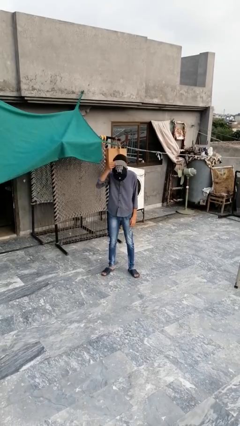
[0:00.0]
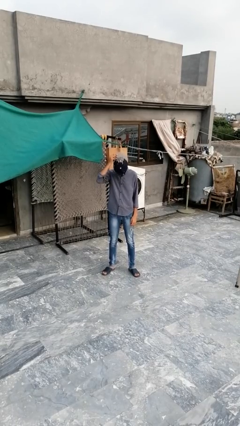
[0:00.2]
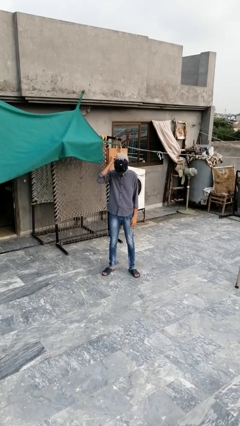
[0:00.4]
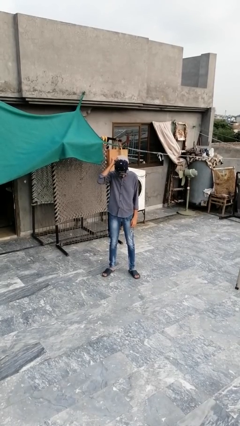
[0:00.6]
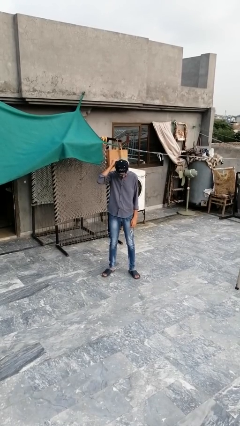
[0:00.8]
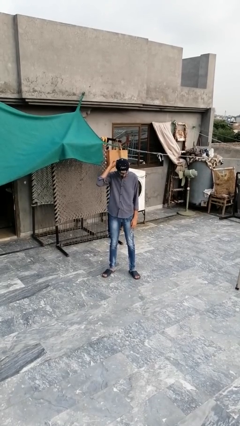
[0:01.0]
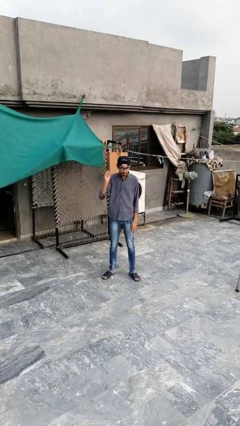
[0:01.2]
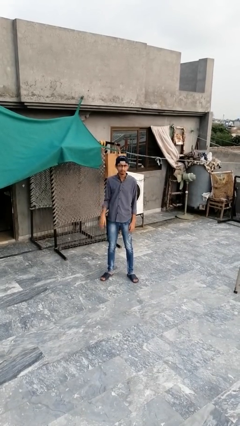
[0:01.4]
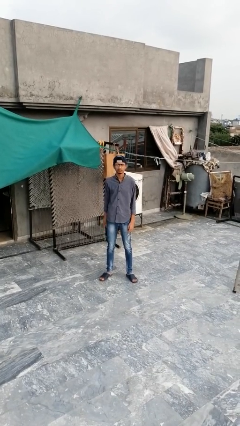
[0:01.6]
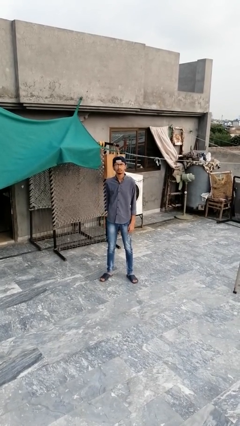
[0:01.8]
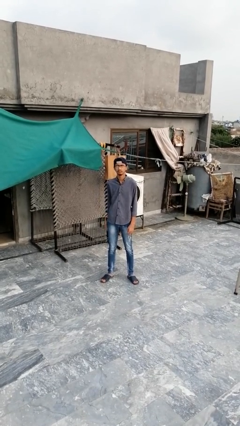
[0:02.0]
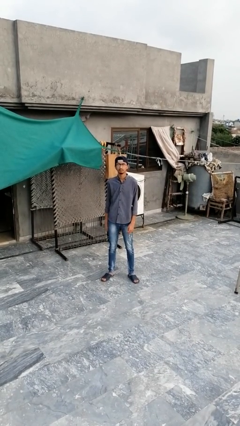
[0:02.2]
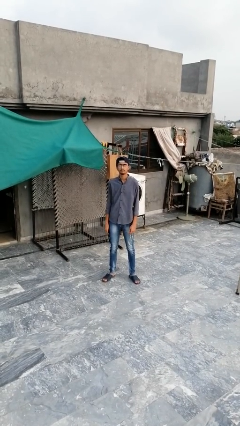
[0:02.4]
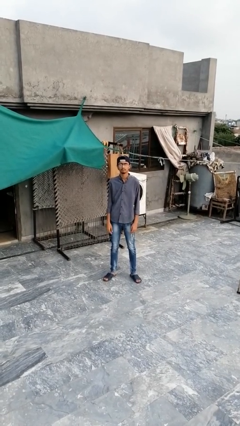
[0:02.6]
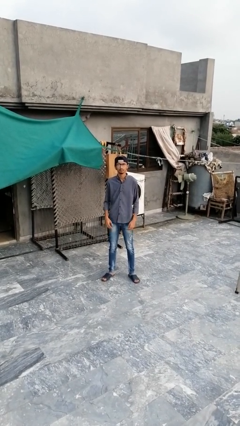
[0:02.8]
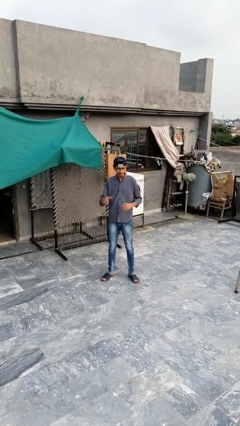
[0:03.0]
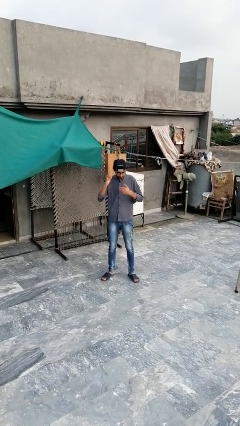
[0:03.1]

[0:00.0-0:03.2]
person puts on hat

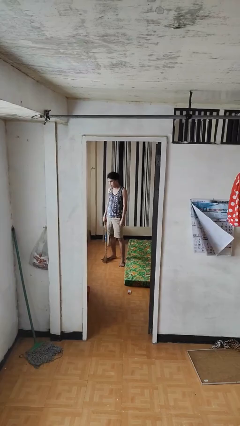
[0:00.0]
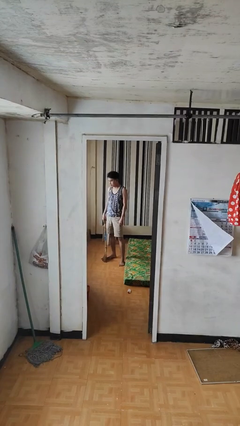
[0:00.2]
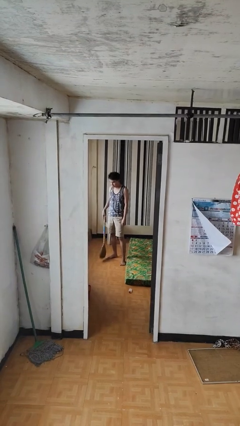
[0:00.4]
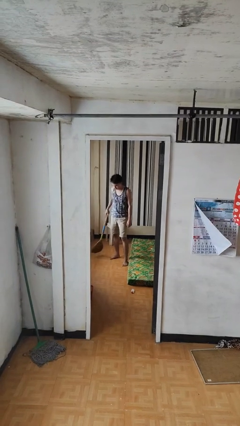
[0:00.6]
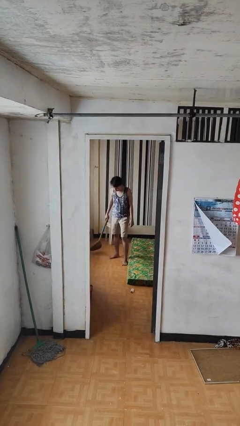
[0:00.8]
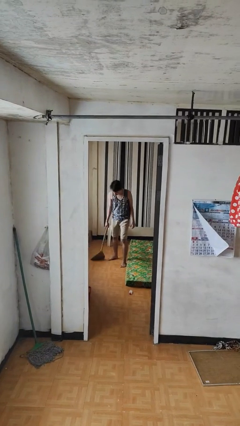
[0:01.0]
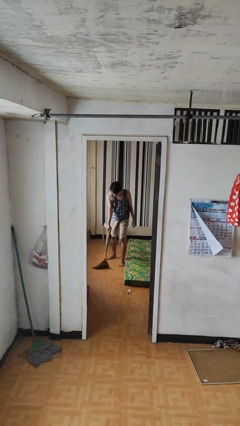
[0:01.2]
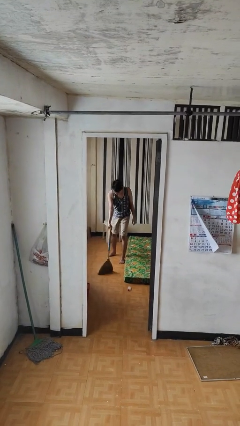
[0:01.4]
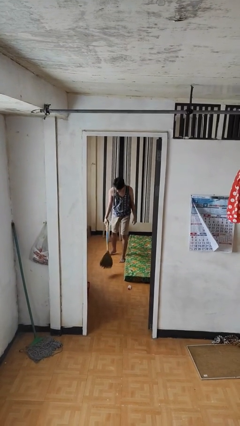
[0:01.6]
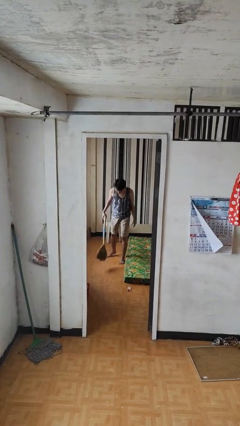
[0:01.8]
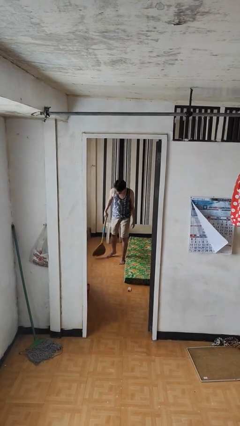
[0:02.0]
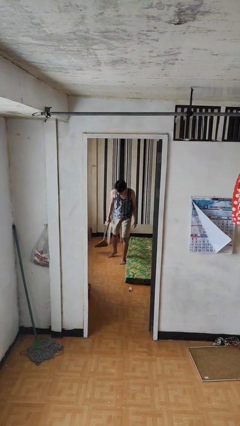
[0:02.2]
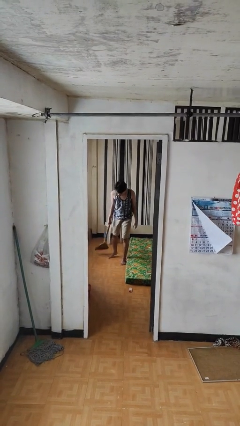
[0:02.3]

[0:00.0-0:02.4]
person sweeps floor

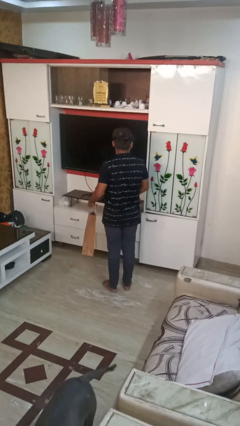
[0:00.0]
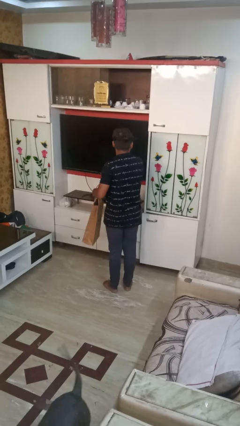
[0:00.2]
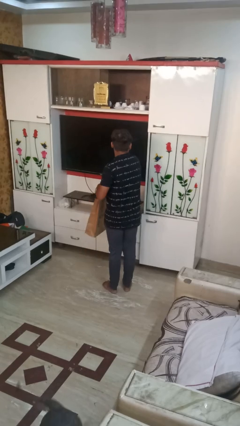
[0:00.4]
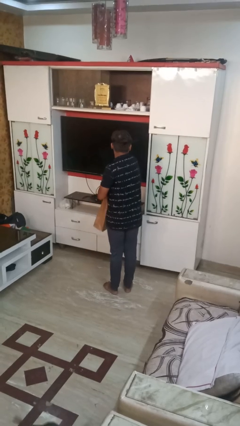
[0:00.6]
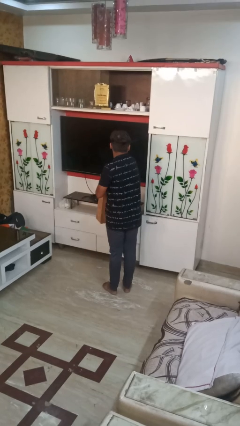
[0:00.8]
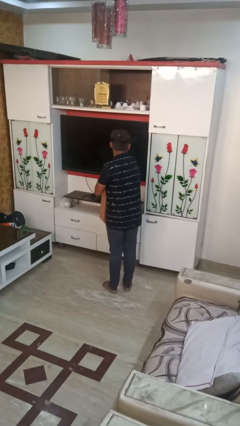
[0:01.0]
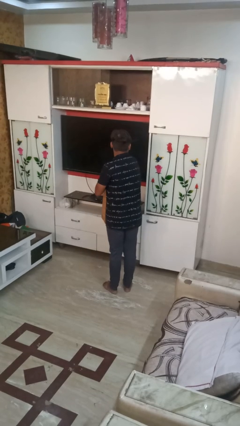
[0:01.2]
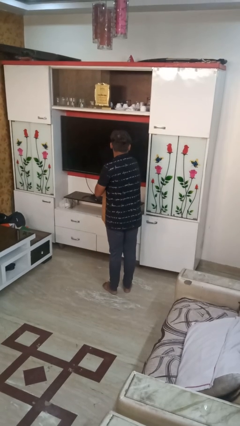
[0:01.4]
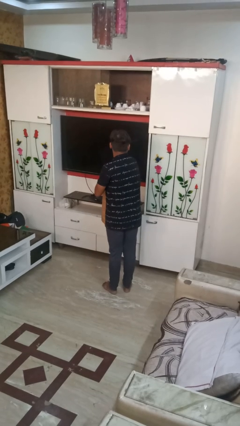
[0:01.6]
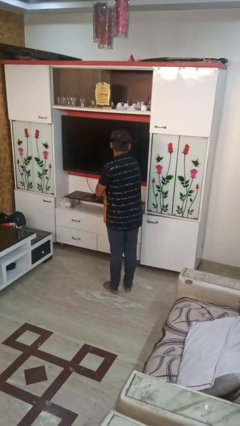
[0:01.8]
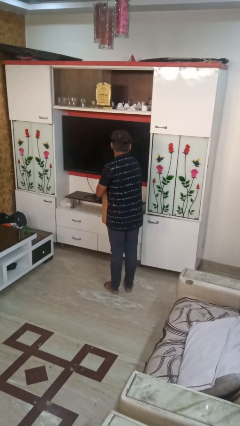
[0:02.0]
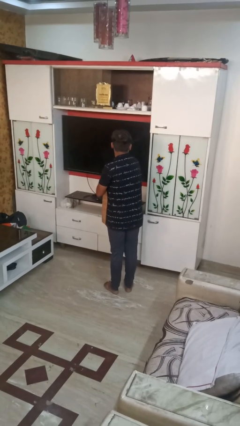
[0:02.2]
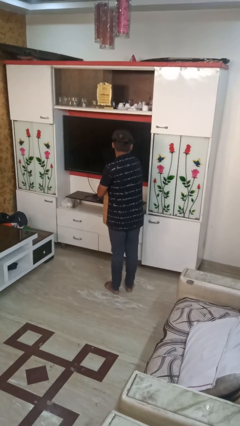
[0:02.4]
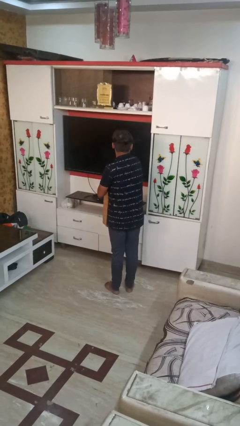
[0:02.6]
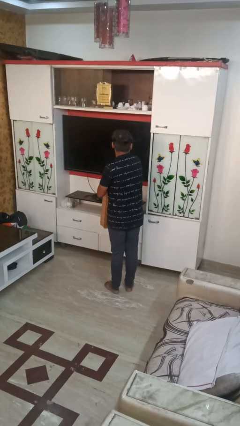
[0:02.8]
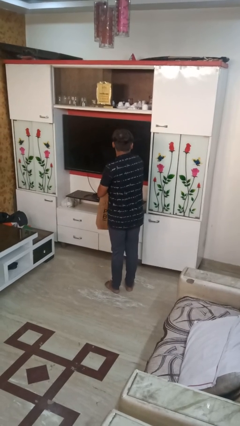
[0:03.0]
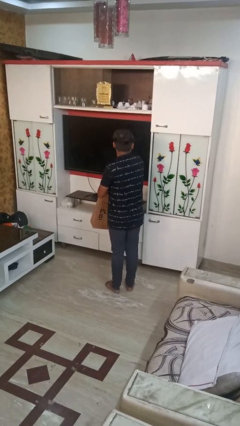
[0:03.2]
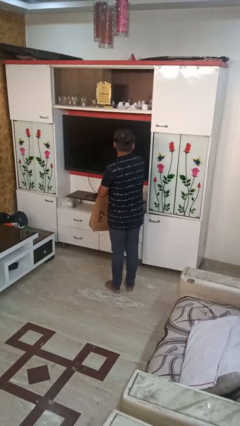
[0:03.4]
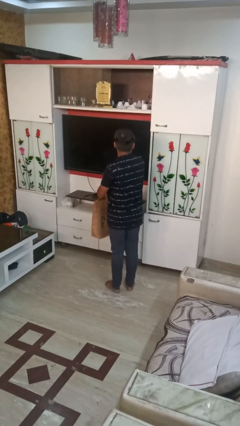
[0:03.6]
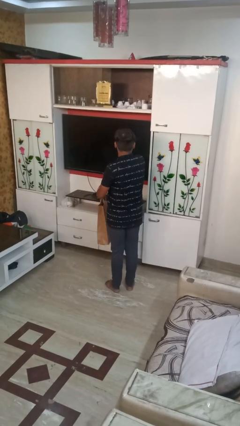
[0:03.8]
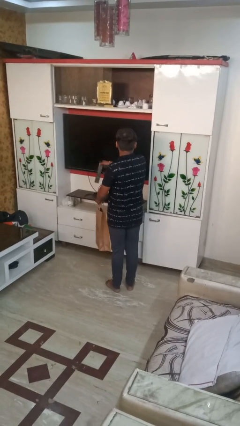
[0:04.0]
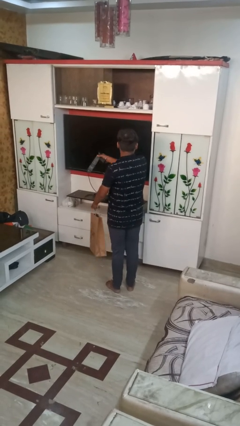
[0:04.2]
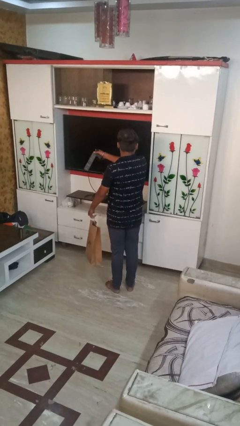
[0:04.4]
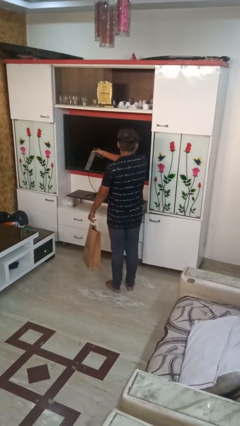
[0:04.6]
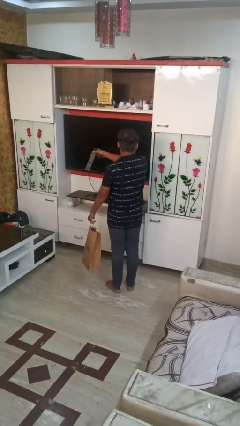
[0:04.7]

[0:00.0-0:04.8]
person takes object from bag

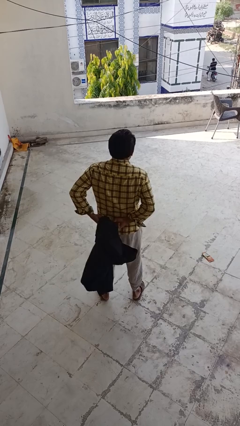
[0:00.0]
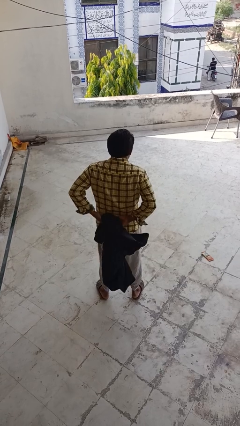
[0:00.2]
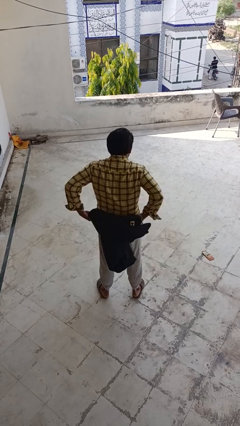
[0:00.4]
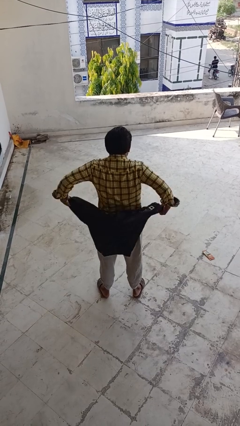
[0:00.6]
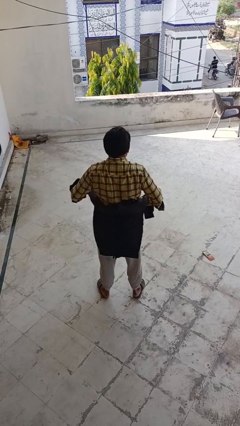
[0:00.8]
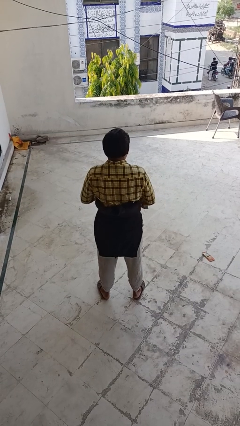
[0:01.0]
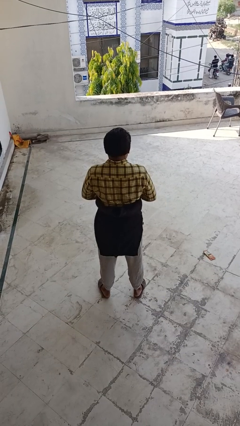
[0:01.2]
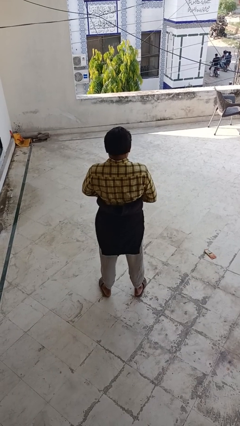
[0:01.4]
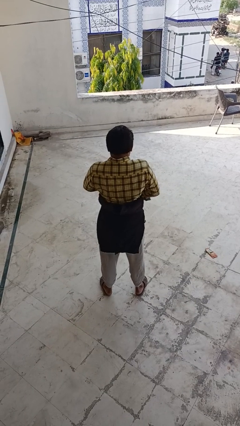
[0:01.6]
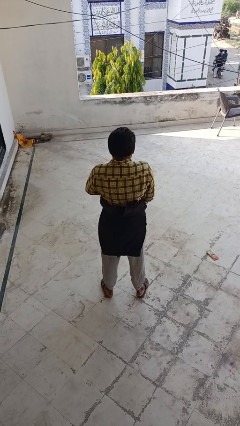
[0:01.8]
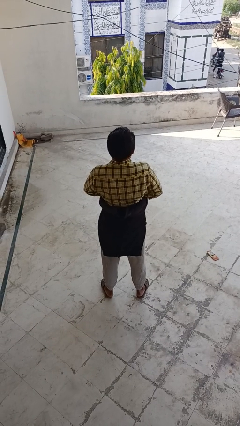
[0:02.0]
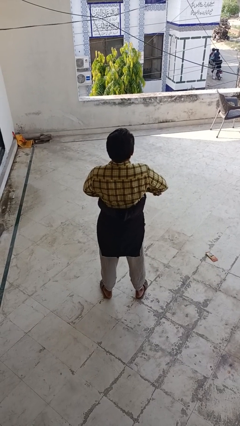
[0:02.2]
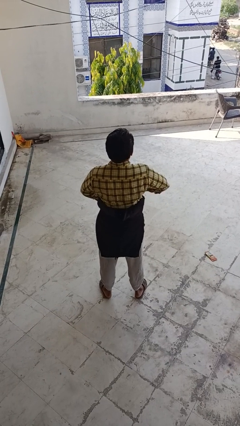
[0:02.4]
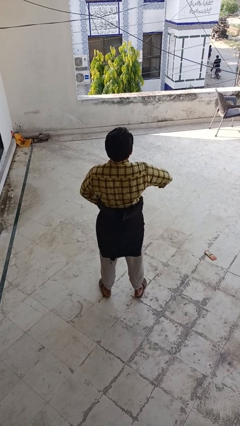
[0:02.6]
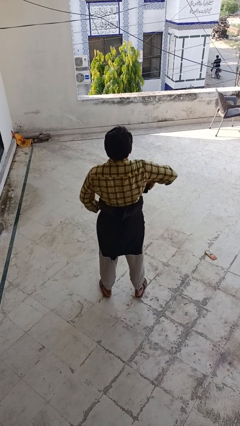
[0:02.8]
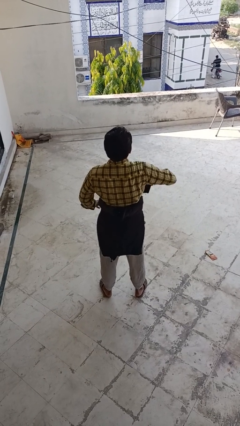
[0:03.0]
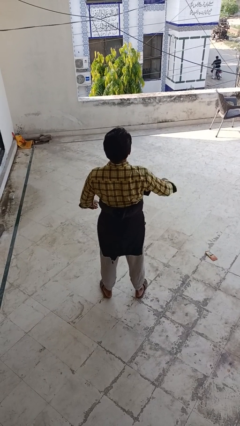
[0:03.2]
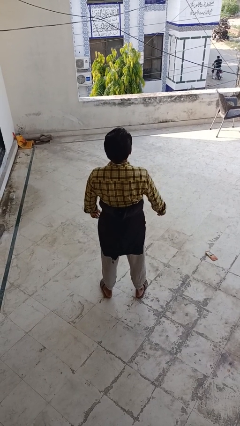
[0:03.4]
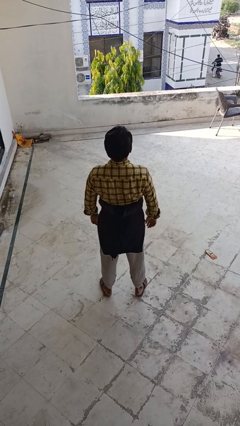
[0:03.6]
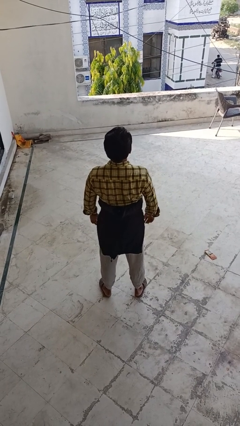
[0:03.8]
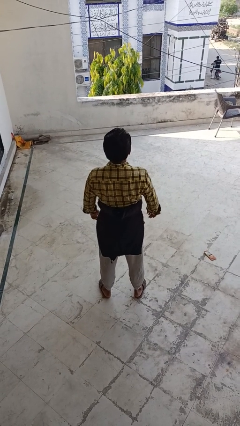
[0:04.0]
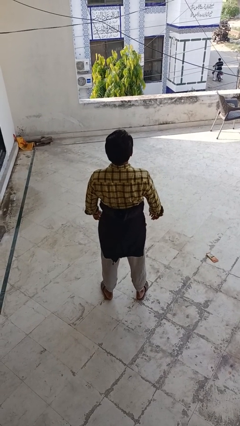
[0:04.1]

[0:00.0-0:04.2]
person ties jacket around waist

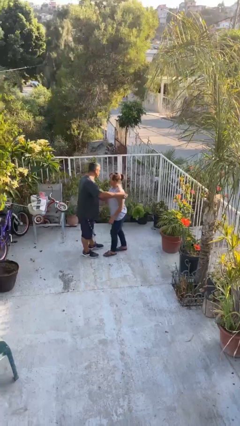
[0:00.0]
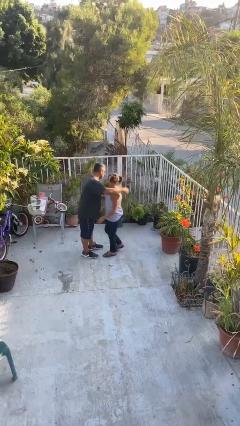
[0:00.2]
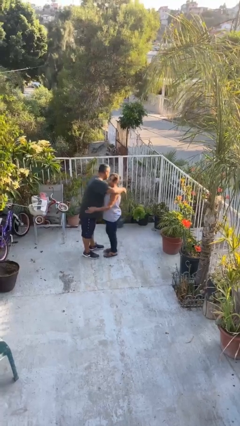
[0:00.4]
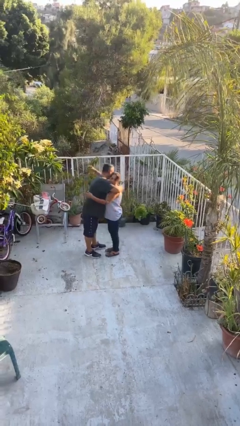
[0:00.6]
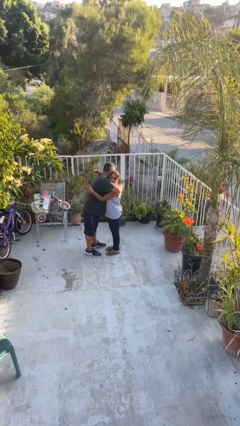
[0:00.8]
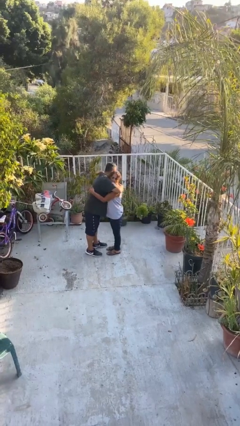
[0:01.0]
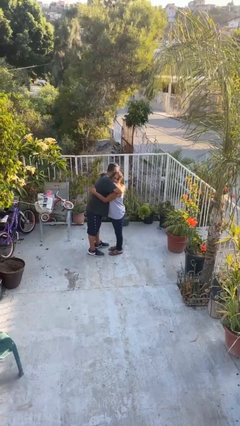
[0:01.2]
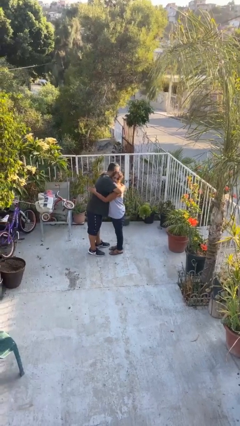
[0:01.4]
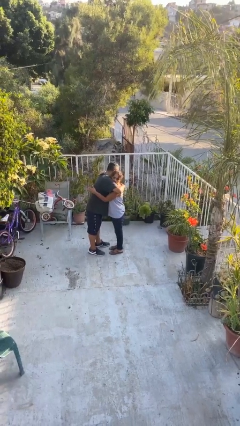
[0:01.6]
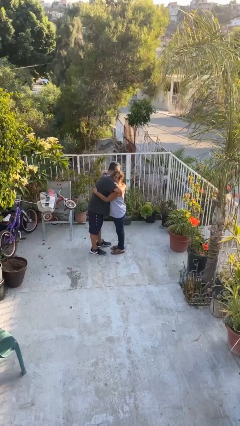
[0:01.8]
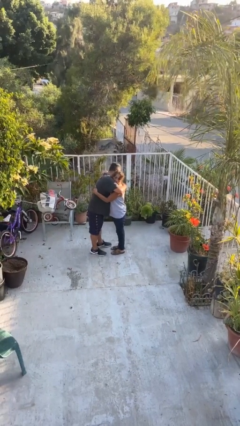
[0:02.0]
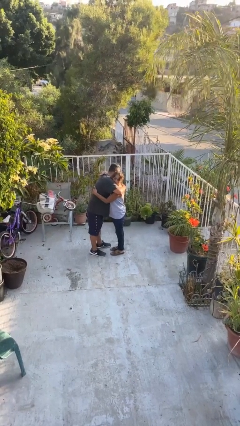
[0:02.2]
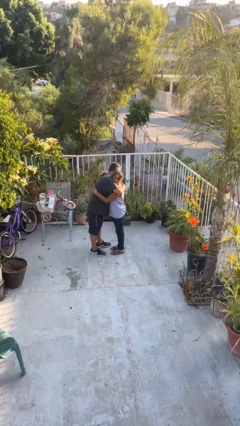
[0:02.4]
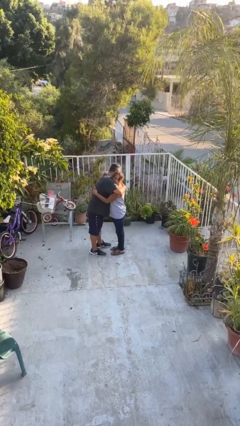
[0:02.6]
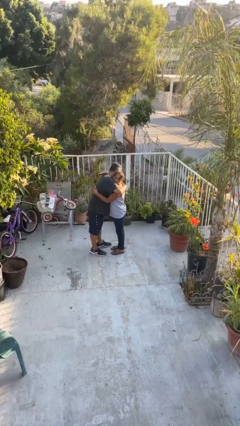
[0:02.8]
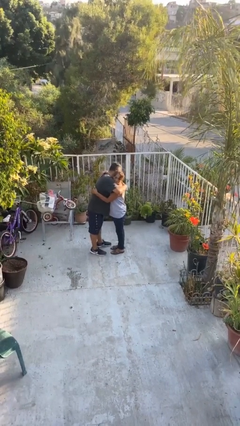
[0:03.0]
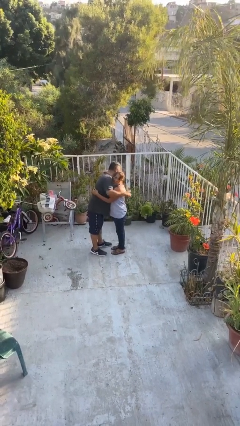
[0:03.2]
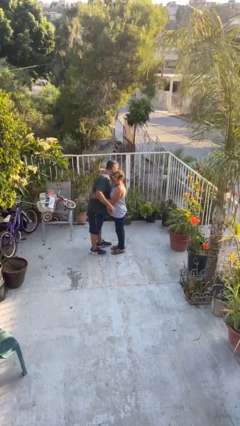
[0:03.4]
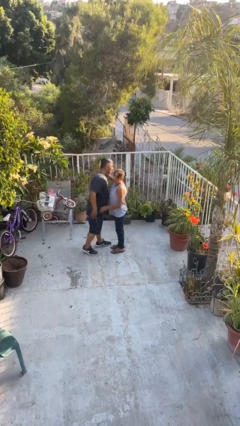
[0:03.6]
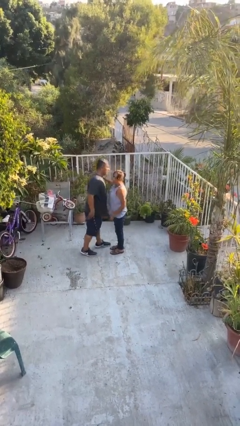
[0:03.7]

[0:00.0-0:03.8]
person embraces person
